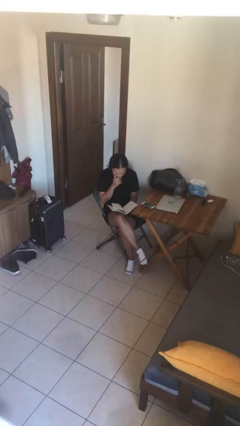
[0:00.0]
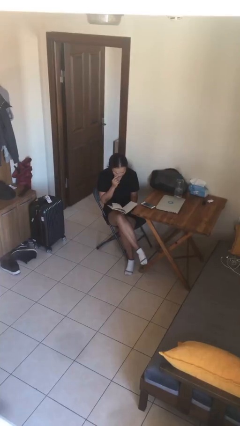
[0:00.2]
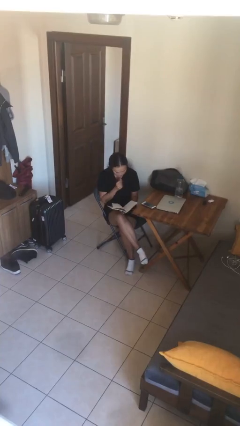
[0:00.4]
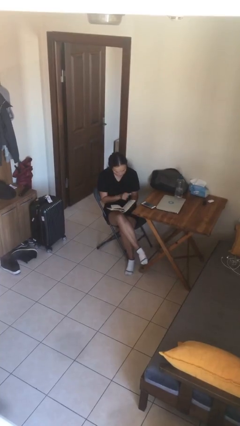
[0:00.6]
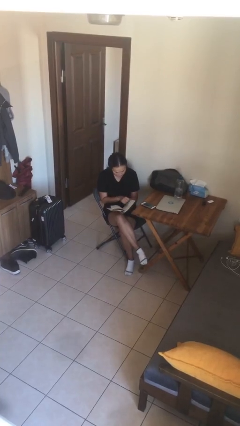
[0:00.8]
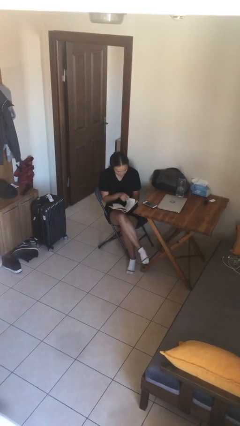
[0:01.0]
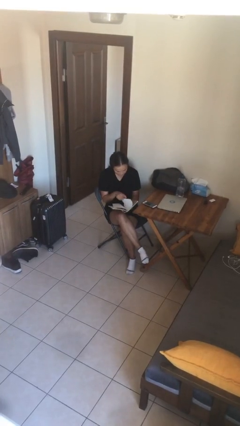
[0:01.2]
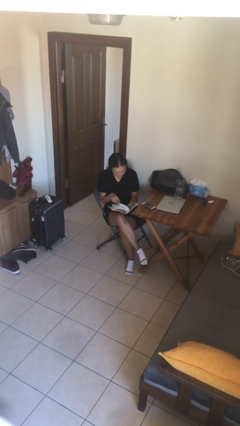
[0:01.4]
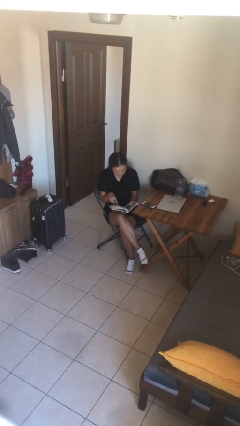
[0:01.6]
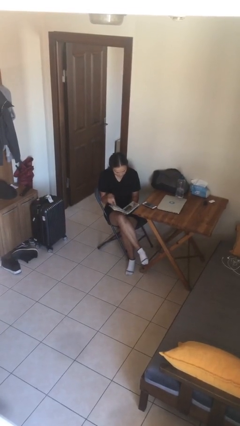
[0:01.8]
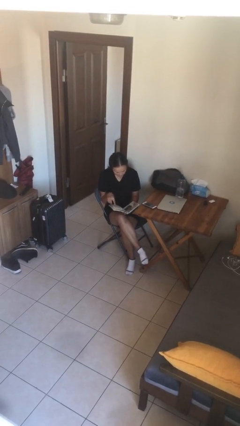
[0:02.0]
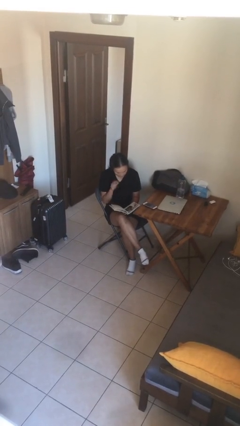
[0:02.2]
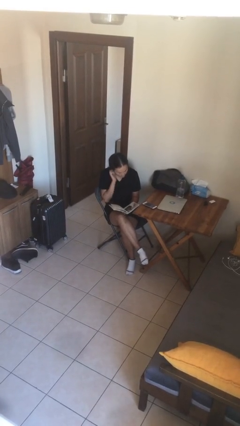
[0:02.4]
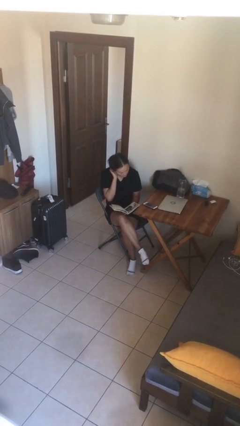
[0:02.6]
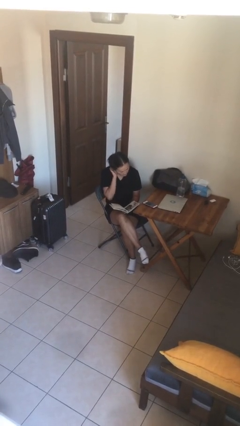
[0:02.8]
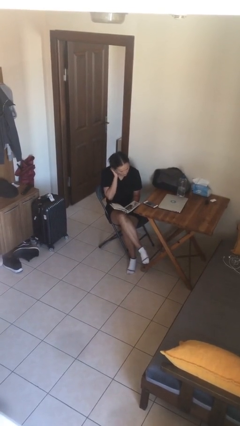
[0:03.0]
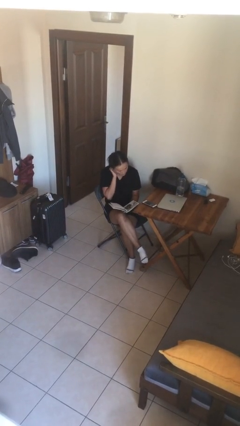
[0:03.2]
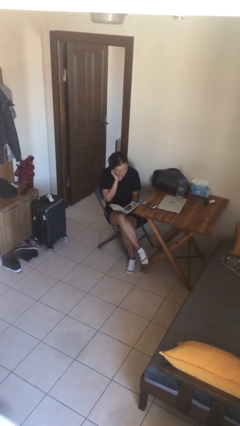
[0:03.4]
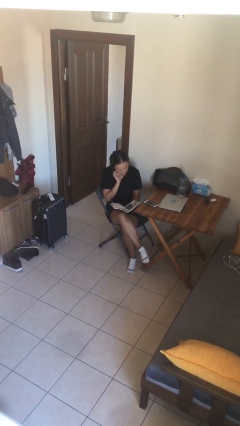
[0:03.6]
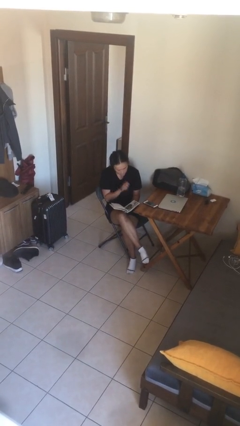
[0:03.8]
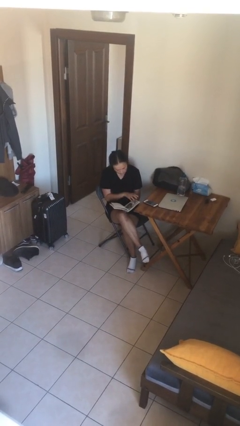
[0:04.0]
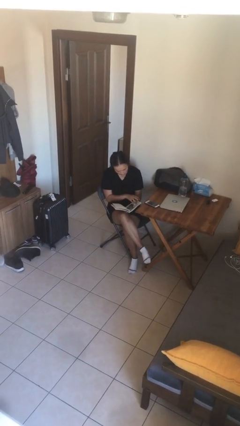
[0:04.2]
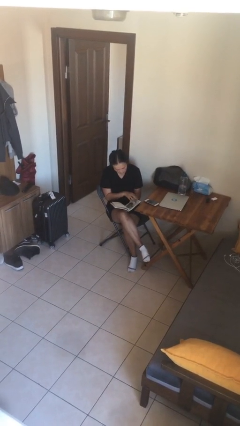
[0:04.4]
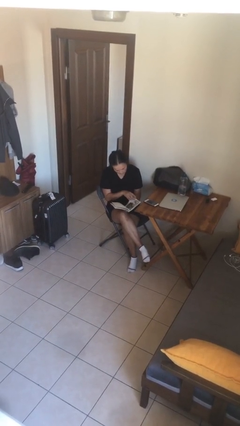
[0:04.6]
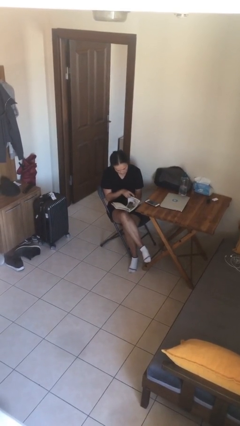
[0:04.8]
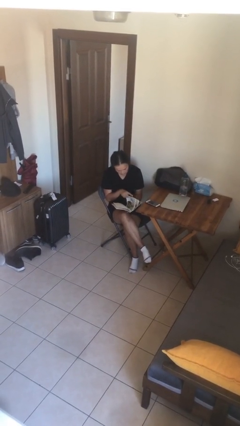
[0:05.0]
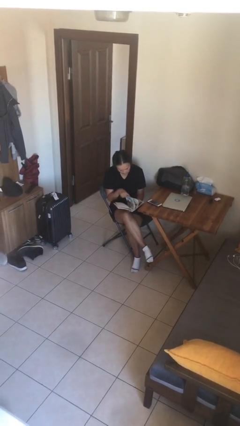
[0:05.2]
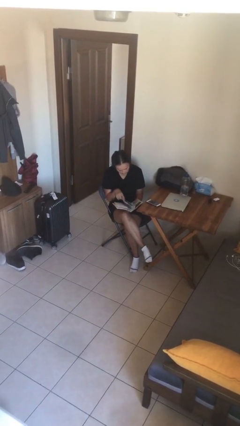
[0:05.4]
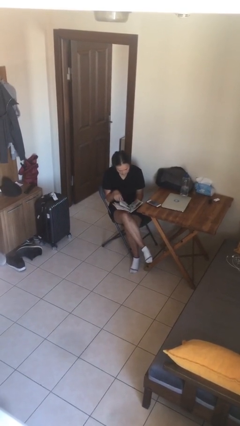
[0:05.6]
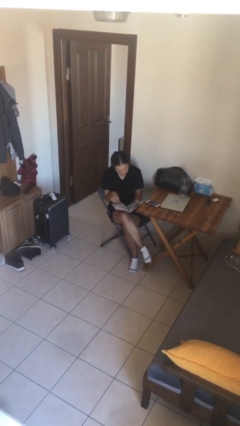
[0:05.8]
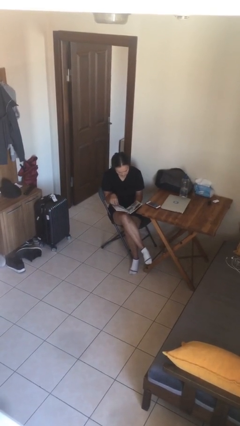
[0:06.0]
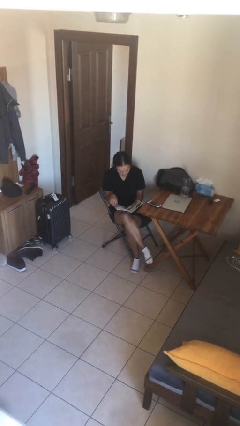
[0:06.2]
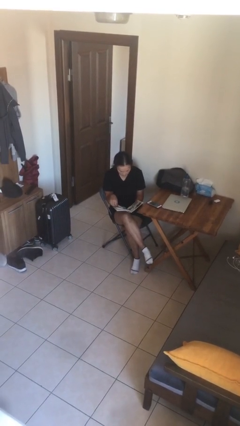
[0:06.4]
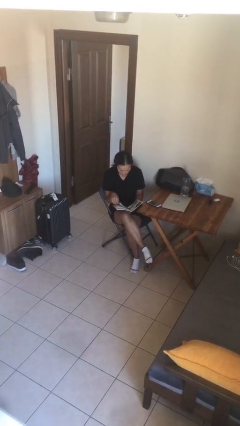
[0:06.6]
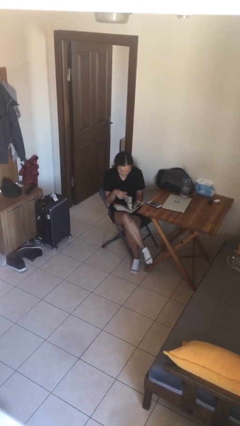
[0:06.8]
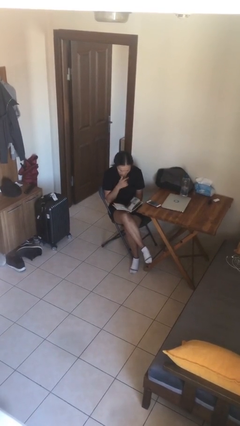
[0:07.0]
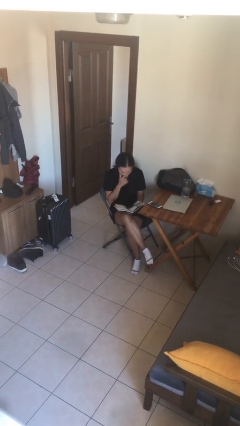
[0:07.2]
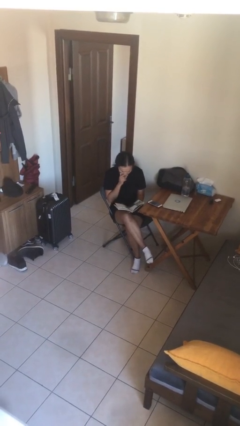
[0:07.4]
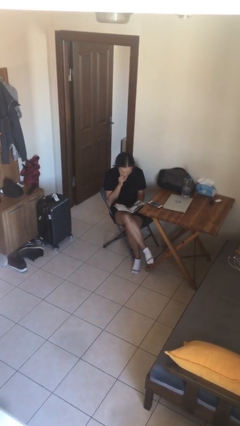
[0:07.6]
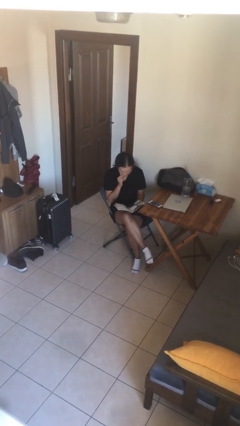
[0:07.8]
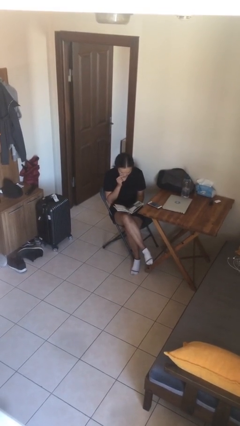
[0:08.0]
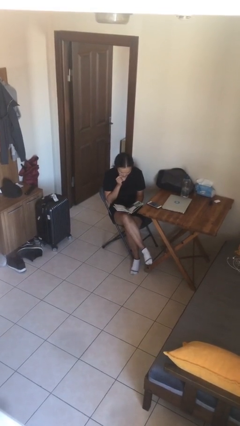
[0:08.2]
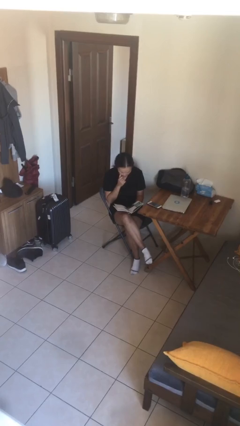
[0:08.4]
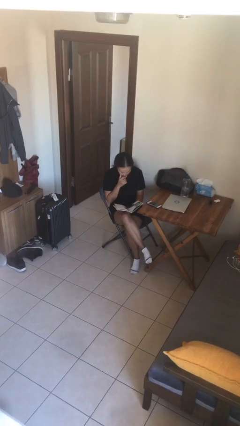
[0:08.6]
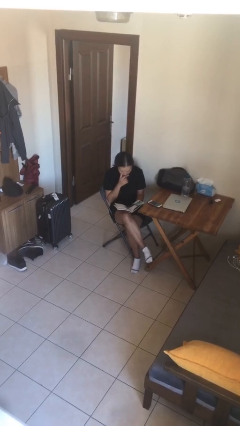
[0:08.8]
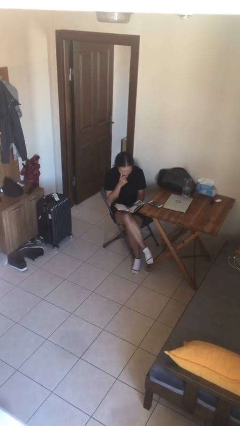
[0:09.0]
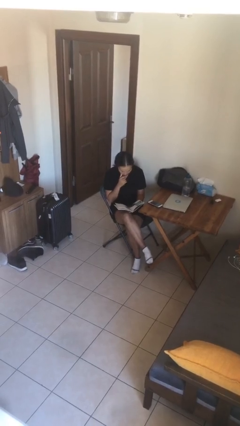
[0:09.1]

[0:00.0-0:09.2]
person reads document

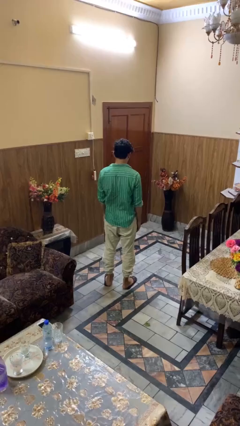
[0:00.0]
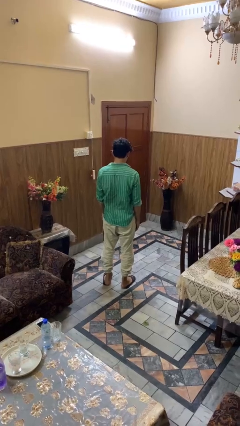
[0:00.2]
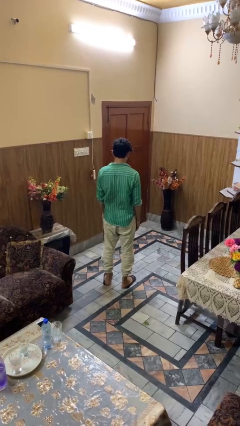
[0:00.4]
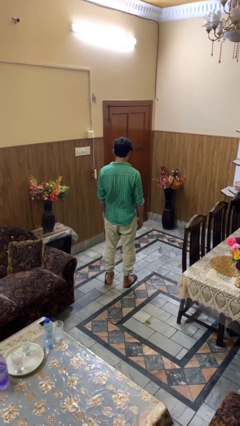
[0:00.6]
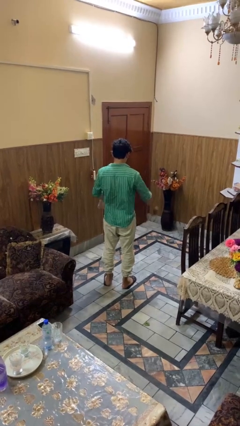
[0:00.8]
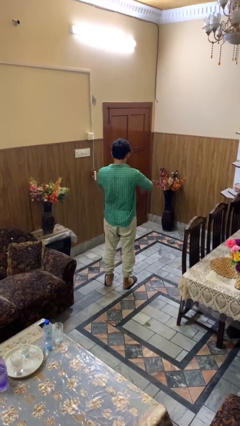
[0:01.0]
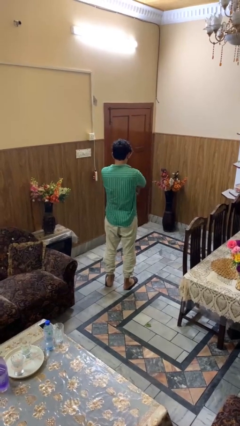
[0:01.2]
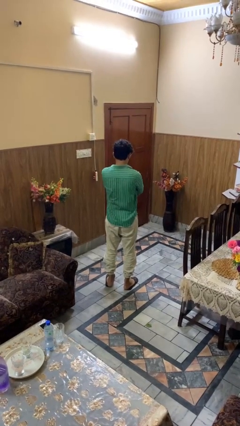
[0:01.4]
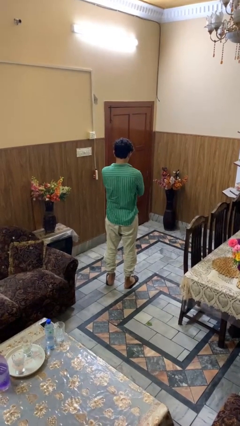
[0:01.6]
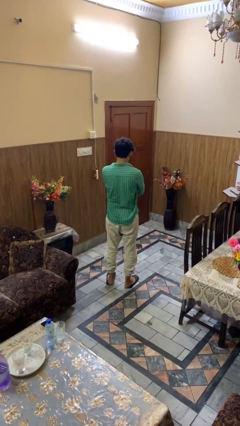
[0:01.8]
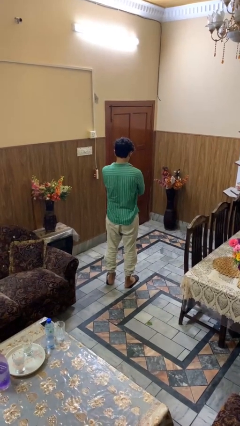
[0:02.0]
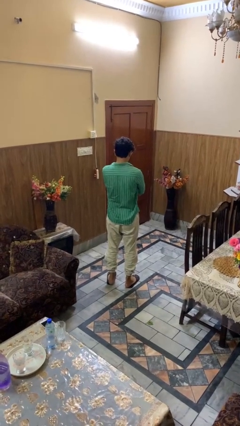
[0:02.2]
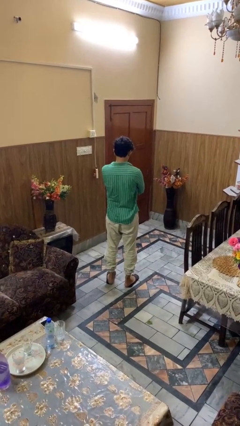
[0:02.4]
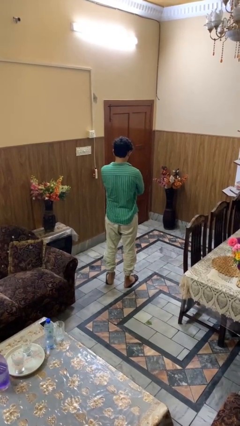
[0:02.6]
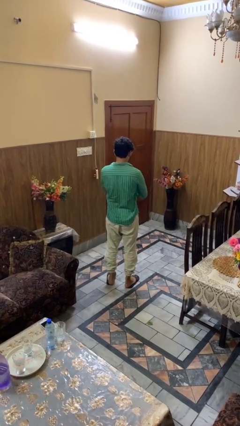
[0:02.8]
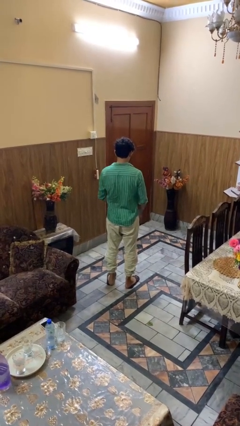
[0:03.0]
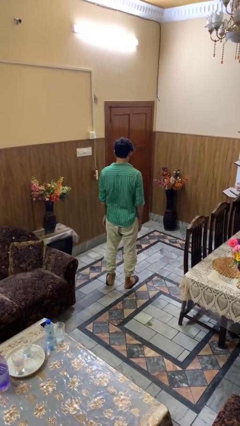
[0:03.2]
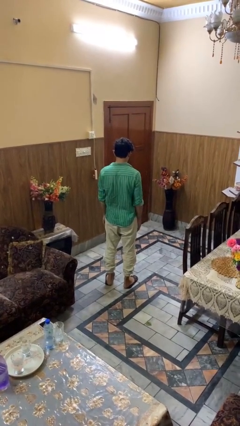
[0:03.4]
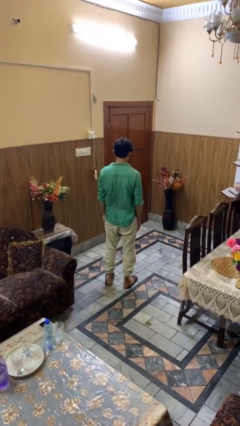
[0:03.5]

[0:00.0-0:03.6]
person crosses arms

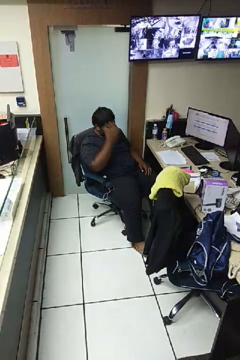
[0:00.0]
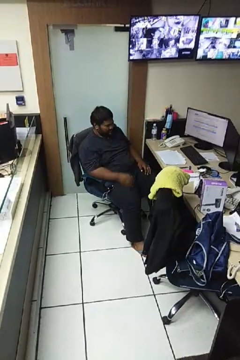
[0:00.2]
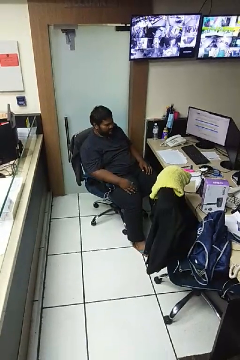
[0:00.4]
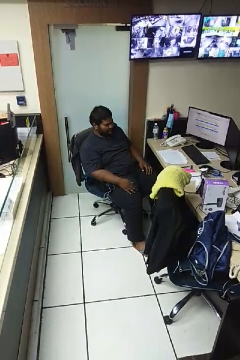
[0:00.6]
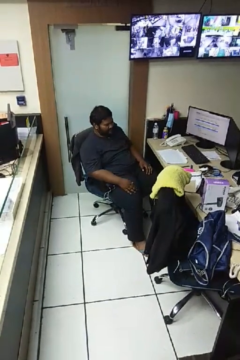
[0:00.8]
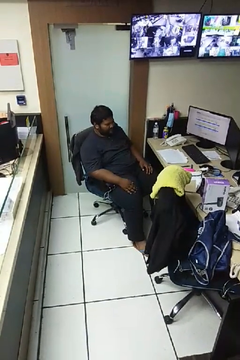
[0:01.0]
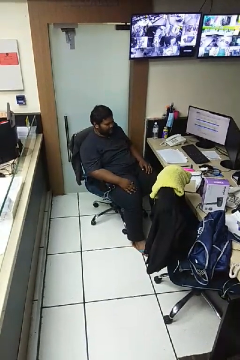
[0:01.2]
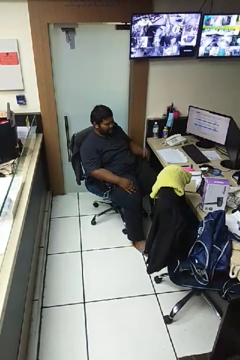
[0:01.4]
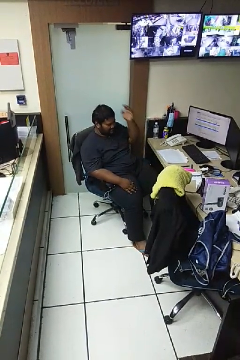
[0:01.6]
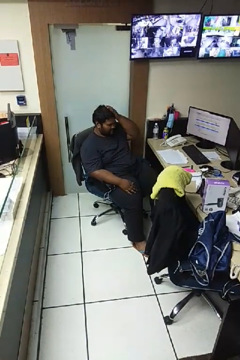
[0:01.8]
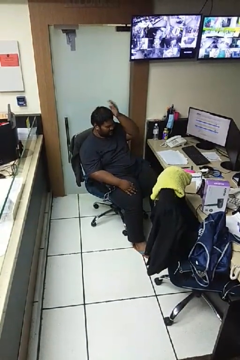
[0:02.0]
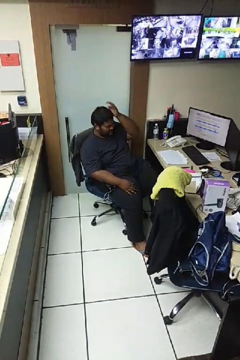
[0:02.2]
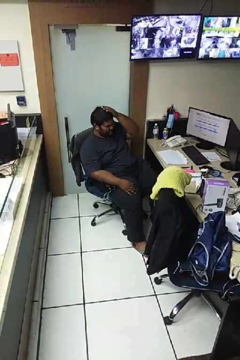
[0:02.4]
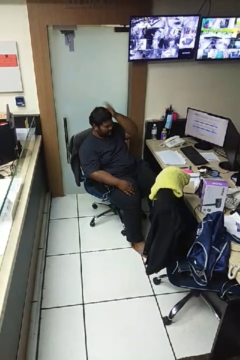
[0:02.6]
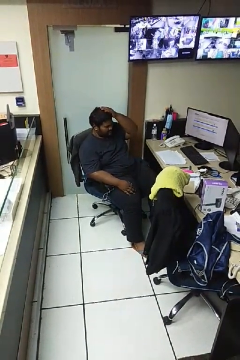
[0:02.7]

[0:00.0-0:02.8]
person pats head

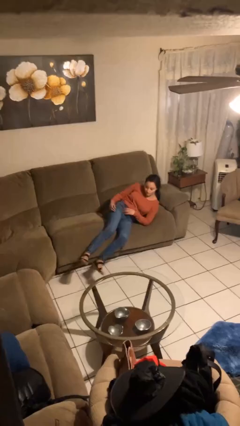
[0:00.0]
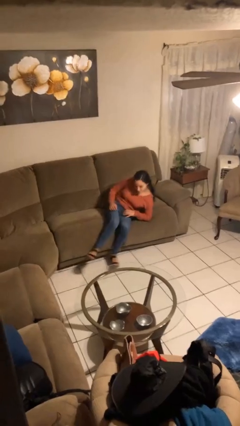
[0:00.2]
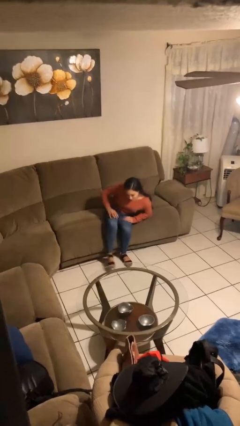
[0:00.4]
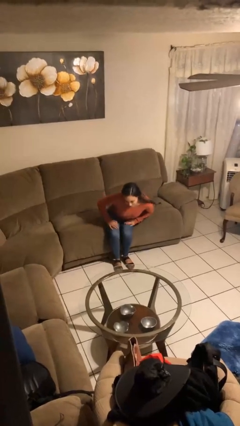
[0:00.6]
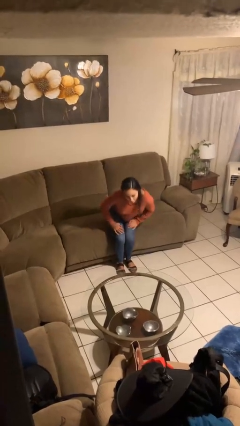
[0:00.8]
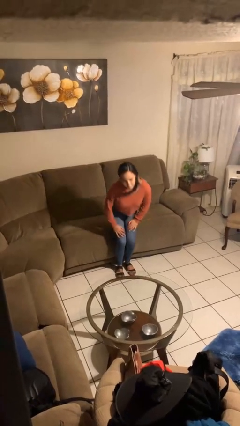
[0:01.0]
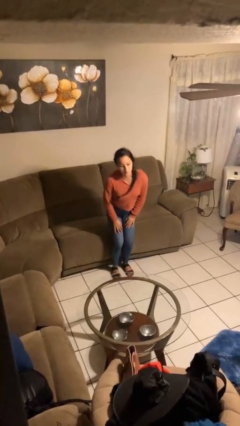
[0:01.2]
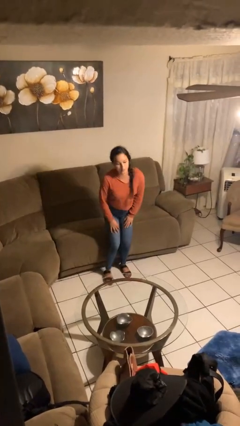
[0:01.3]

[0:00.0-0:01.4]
person stands up

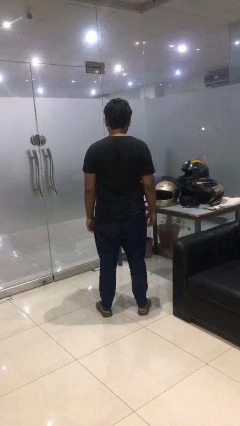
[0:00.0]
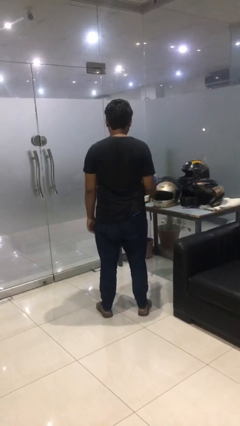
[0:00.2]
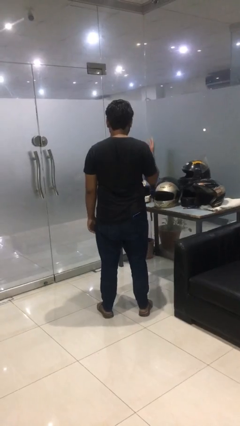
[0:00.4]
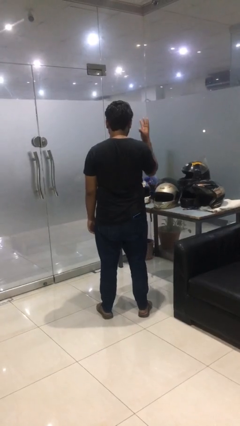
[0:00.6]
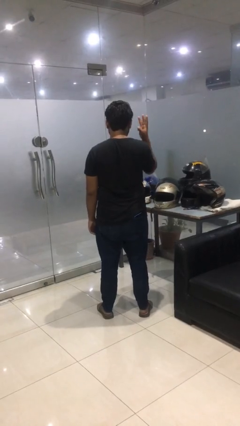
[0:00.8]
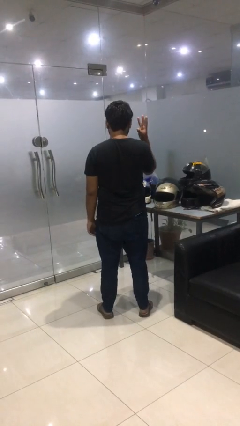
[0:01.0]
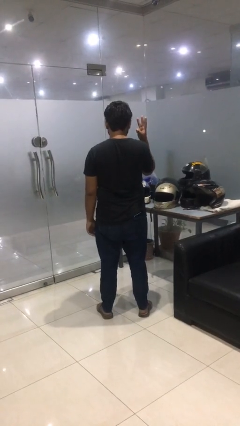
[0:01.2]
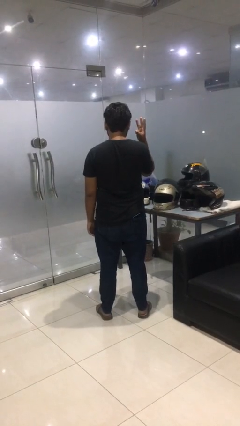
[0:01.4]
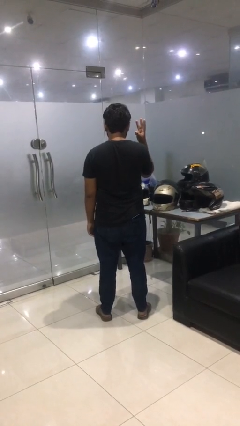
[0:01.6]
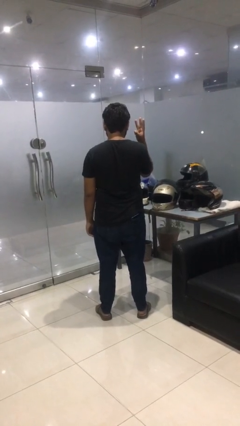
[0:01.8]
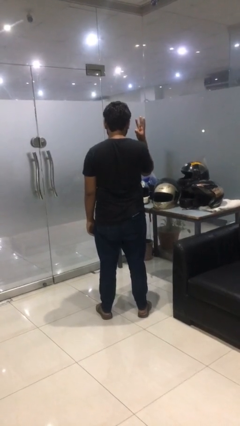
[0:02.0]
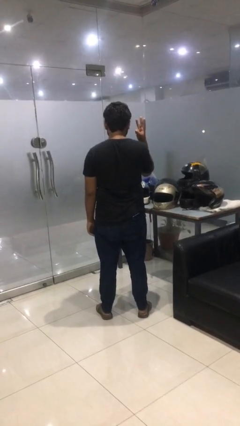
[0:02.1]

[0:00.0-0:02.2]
person gestures number three
